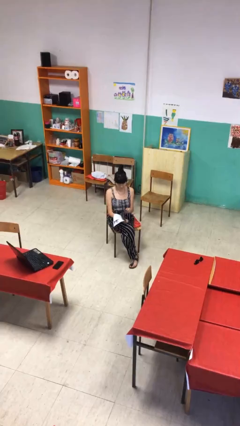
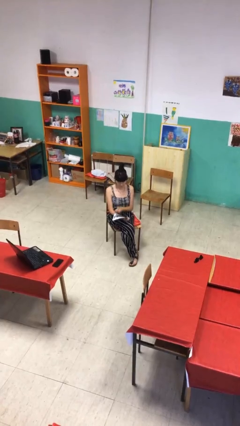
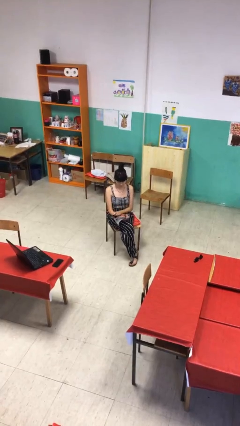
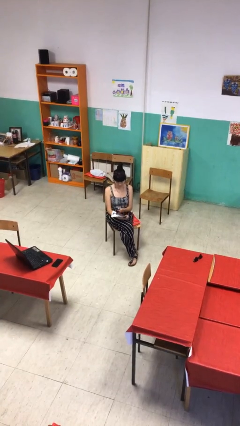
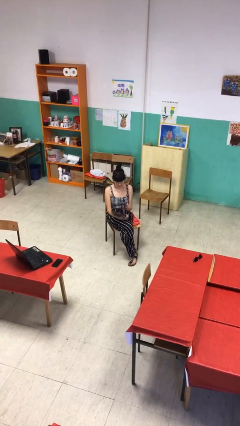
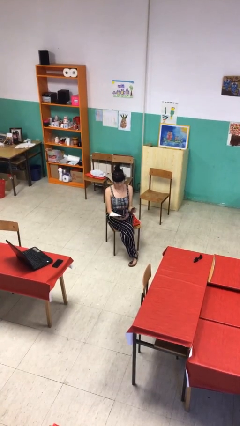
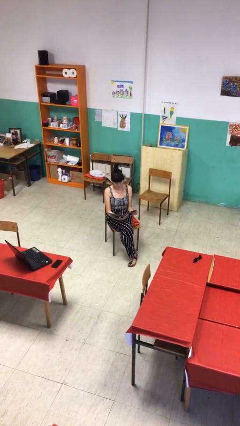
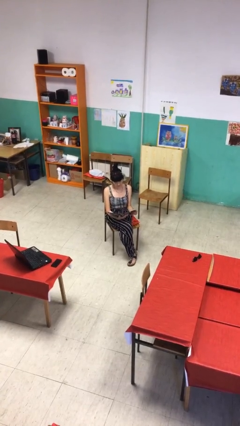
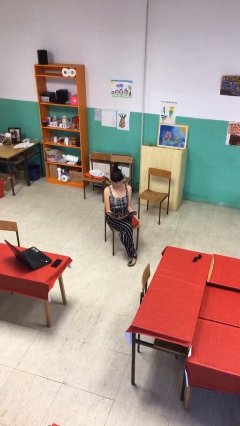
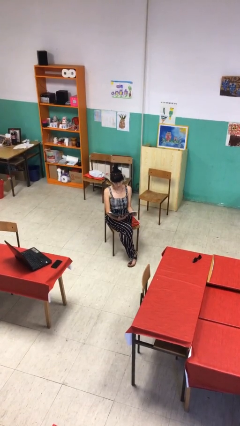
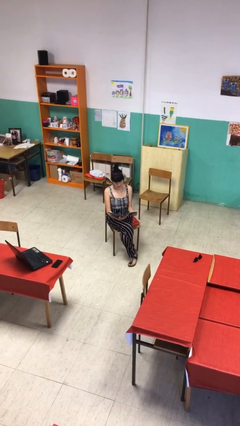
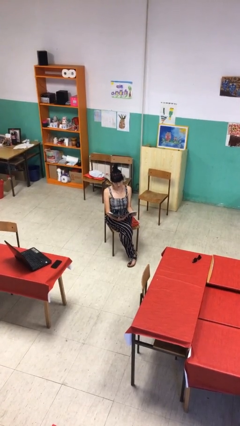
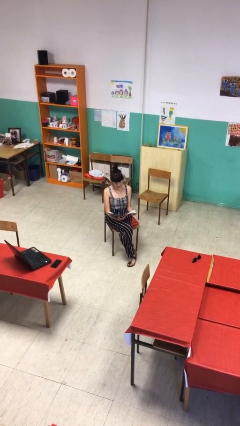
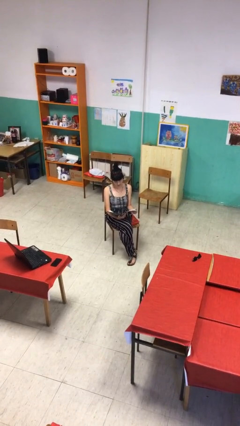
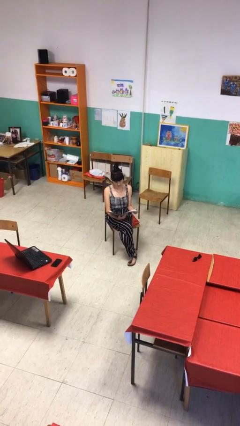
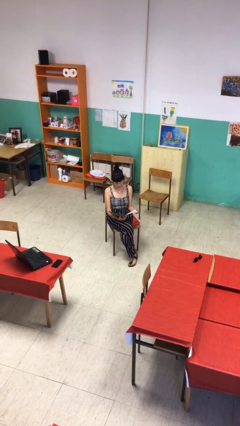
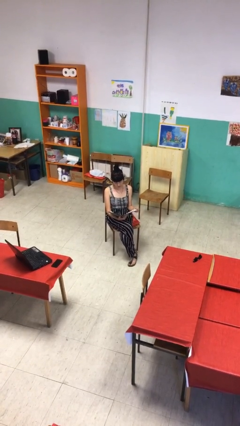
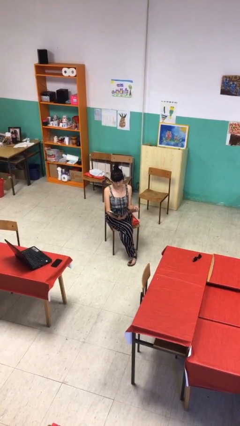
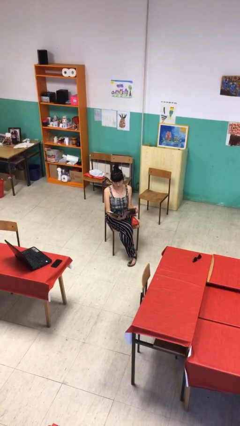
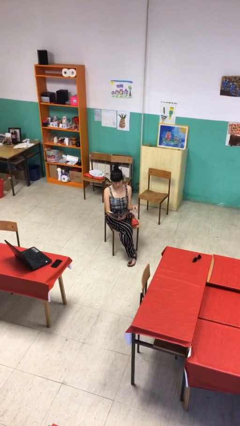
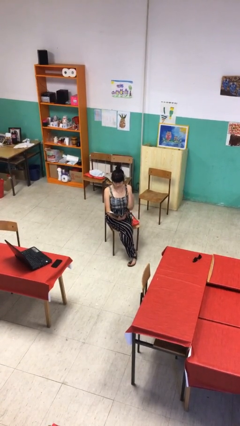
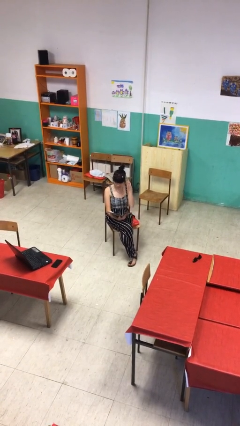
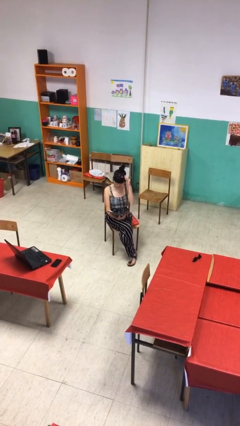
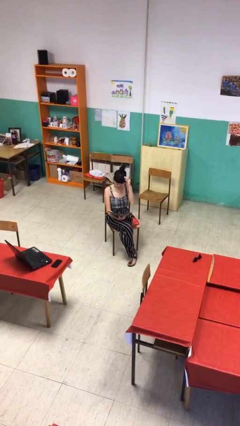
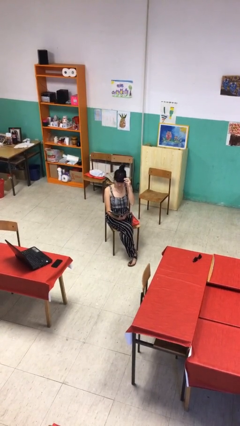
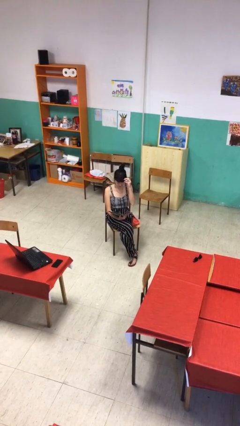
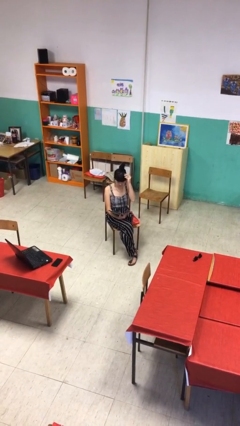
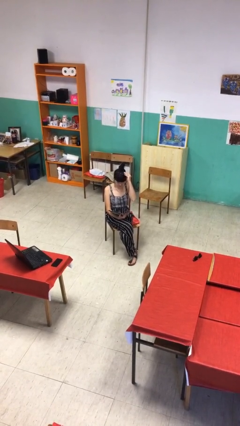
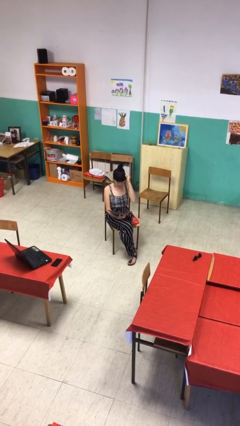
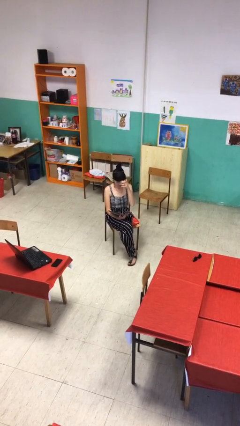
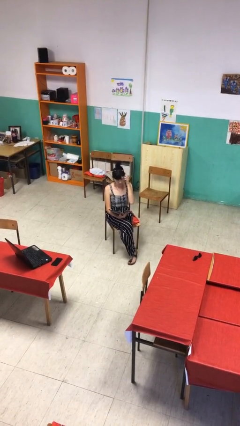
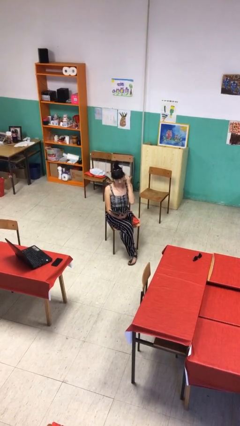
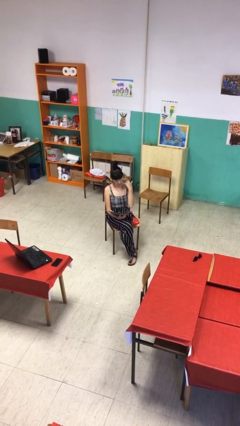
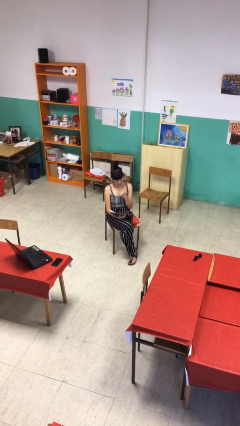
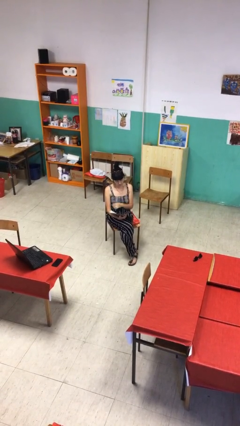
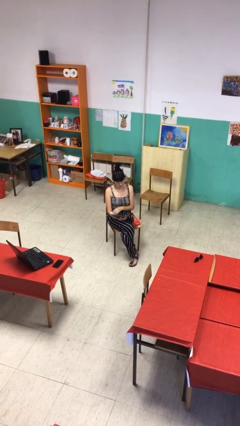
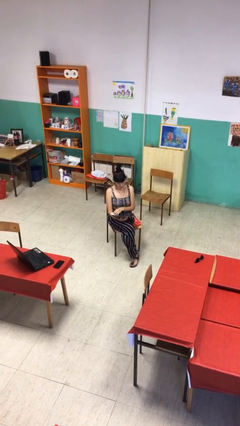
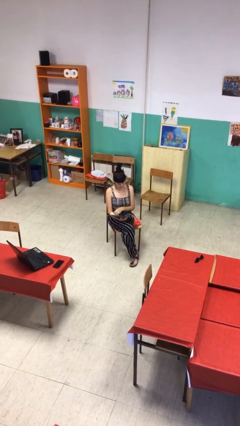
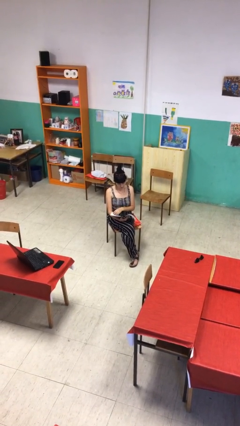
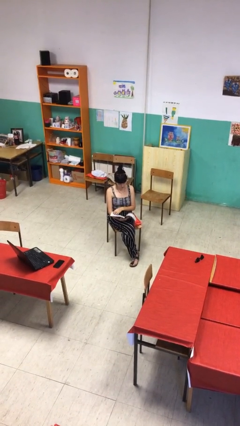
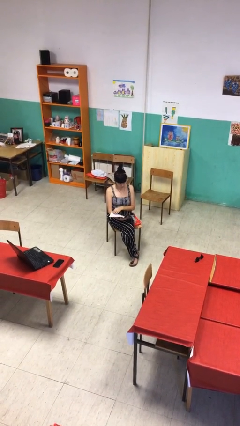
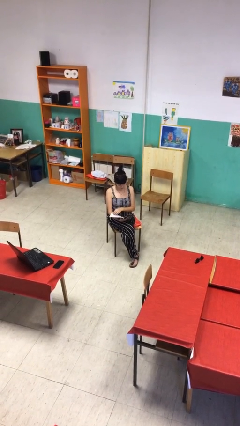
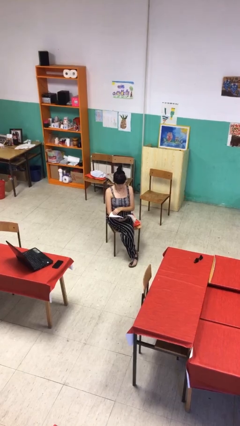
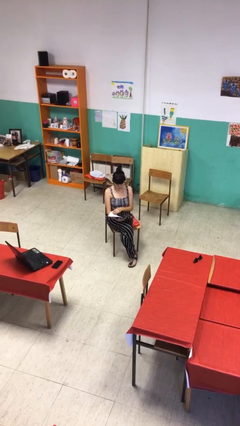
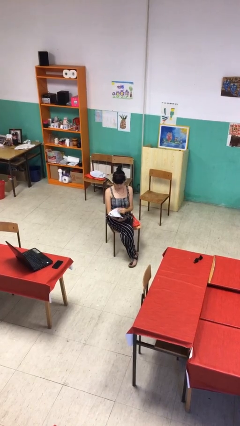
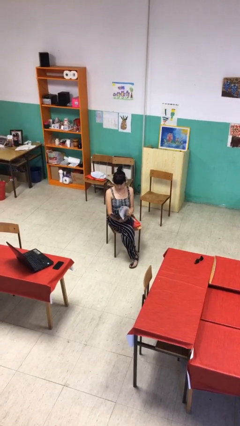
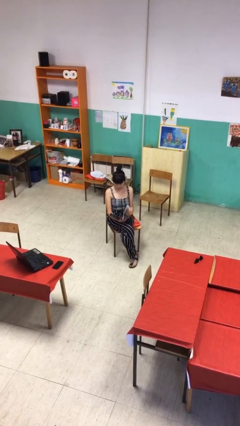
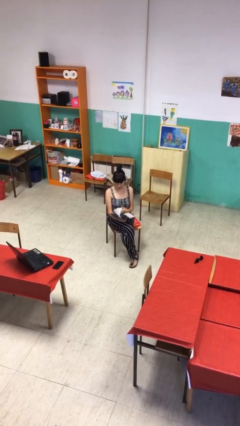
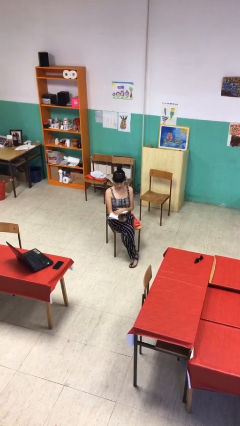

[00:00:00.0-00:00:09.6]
person reads document

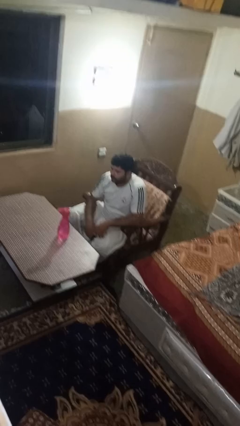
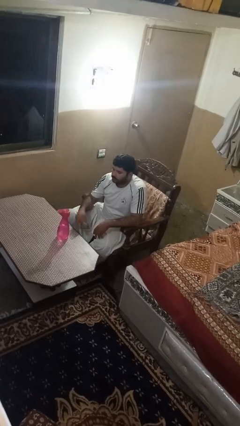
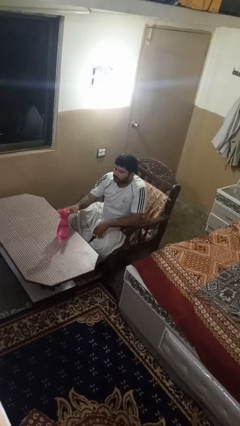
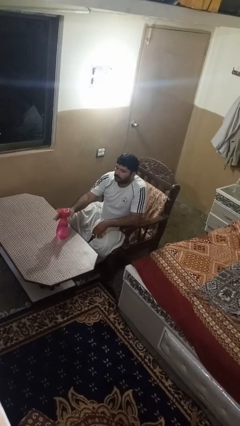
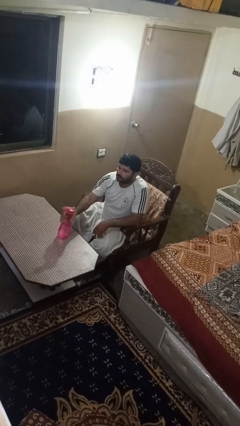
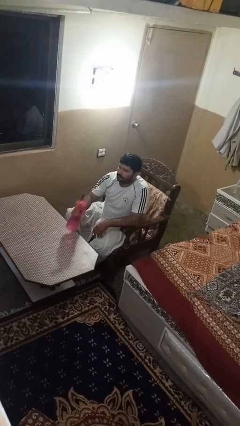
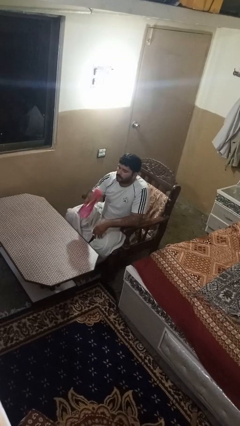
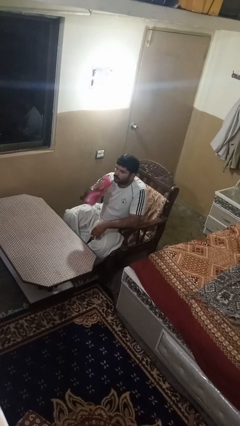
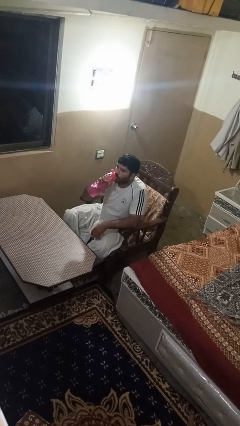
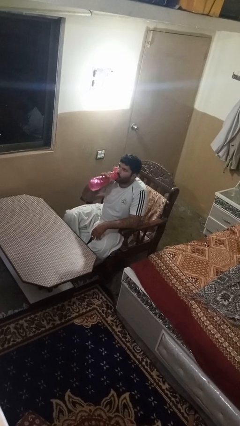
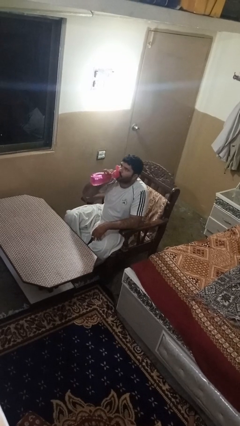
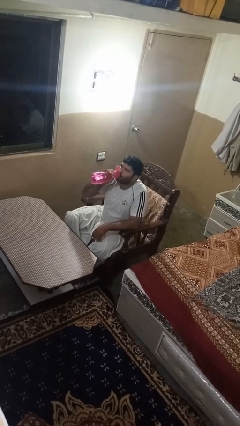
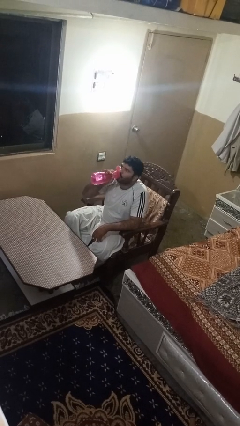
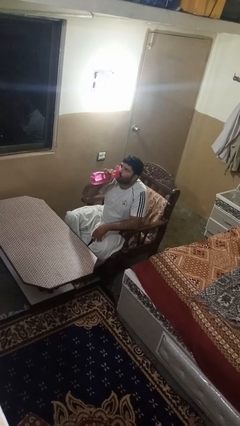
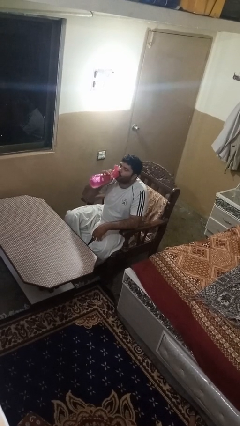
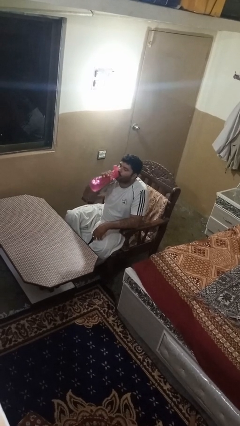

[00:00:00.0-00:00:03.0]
person drinks from bottle

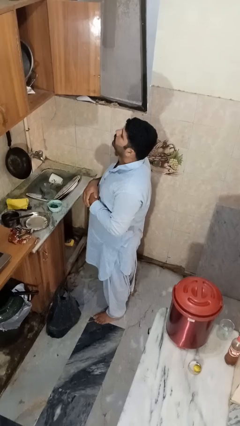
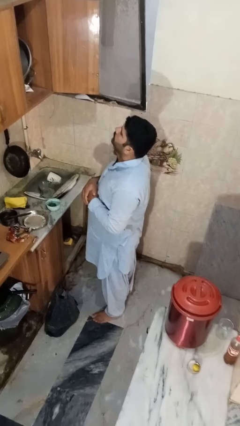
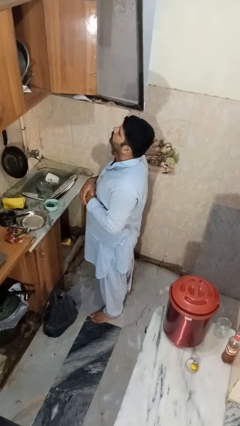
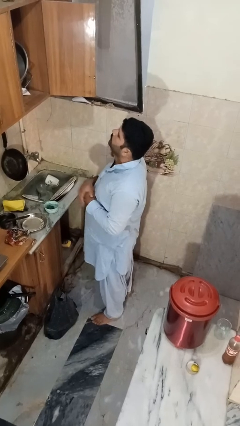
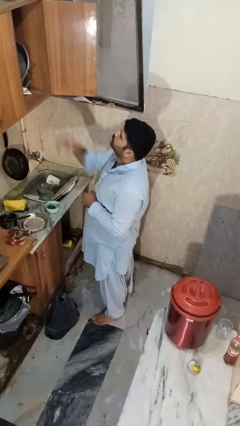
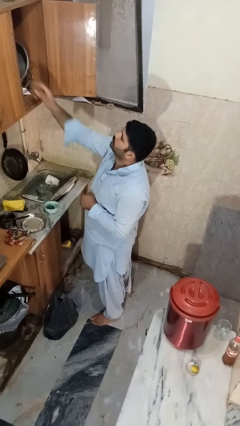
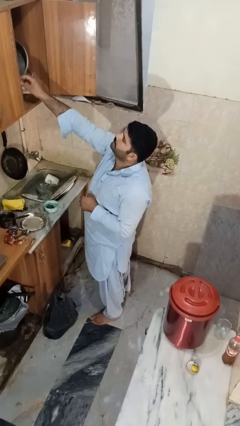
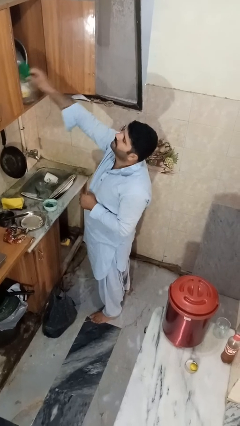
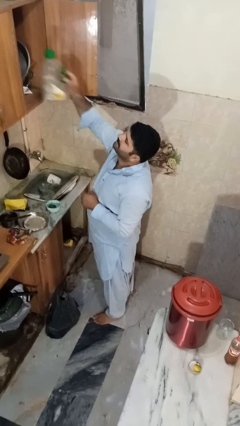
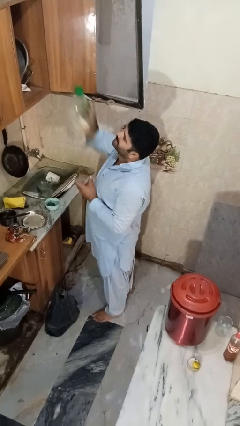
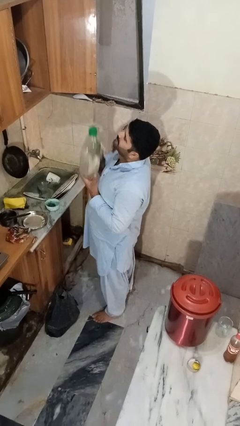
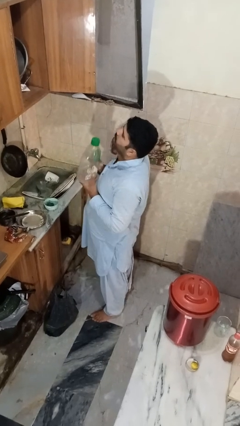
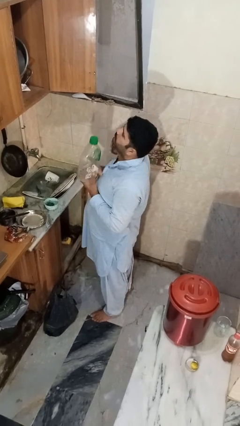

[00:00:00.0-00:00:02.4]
person takes object from cabinet

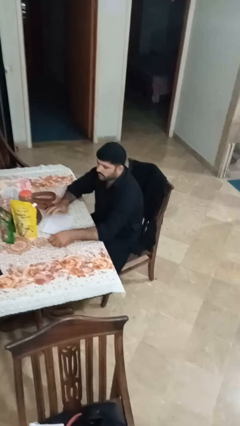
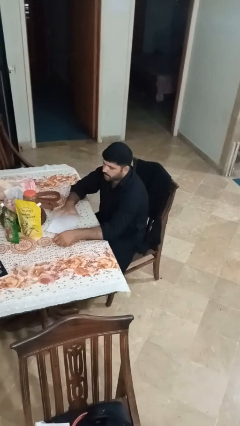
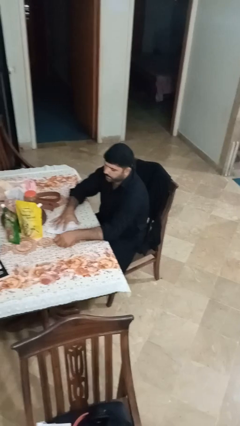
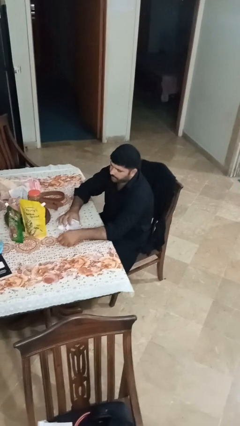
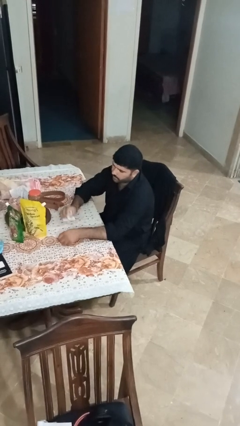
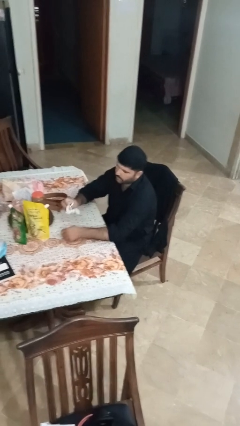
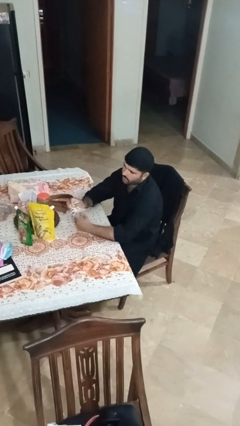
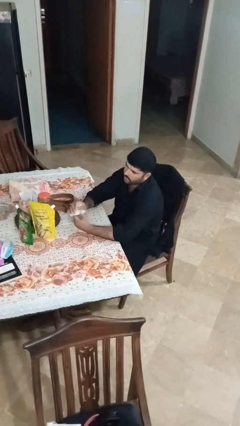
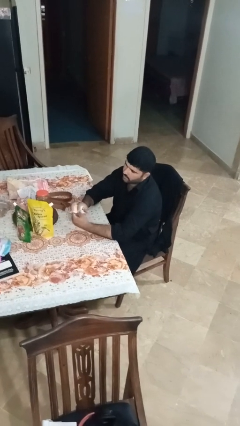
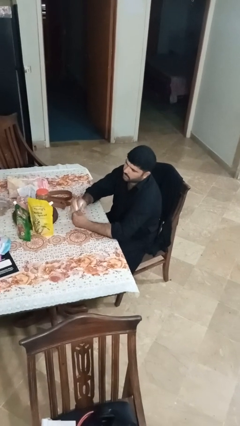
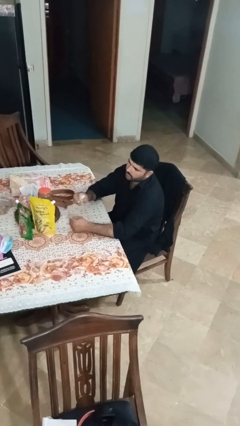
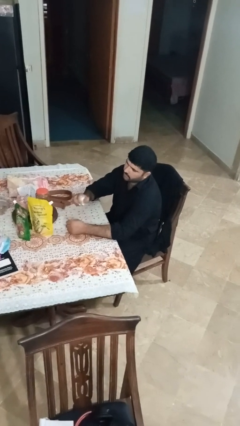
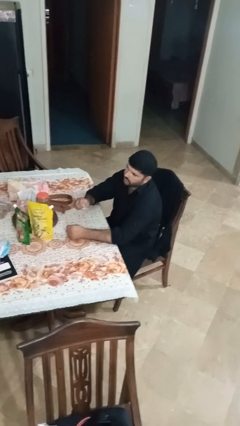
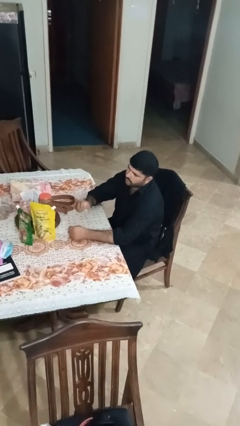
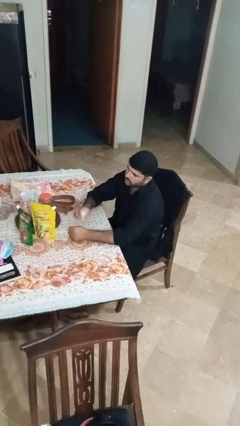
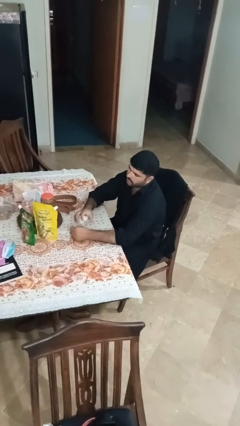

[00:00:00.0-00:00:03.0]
person crumples paper
